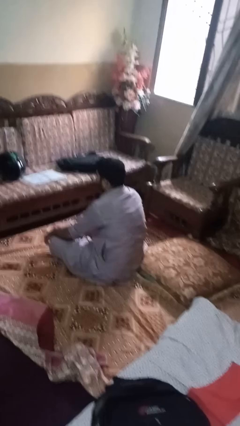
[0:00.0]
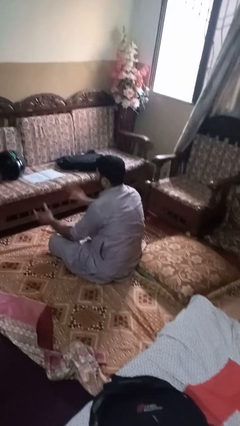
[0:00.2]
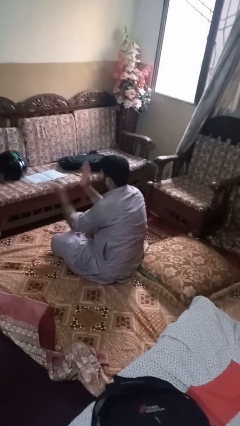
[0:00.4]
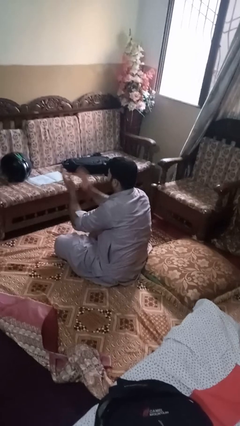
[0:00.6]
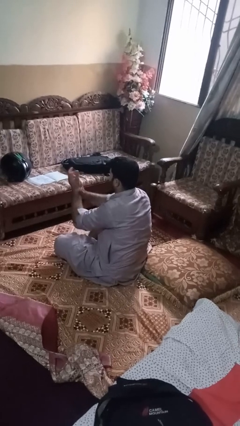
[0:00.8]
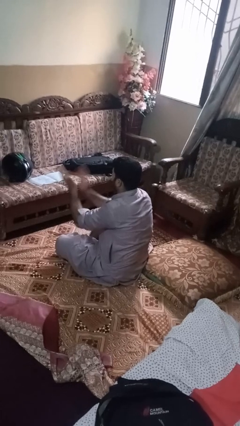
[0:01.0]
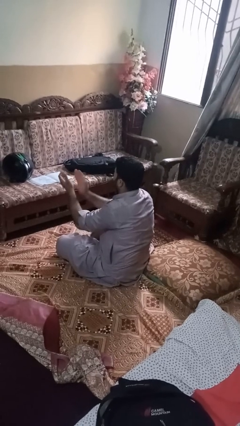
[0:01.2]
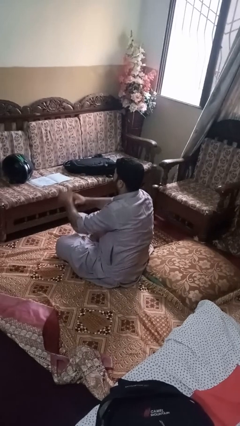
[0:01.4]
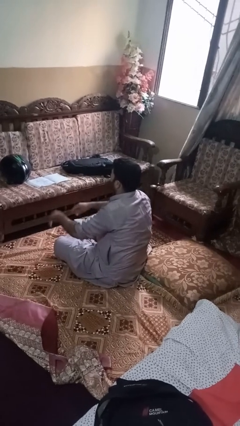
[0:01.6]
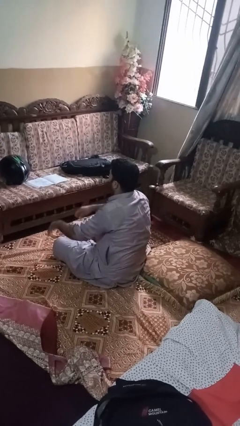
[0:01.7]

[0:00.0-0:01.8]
person claps hands

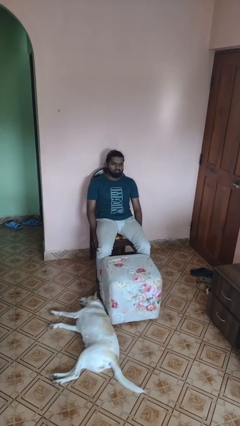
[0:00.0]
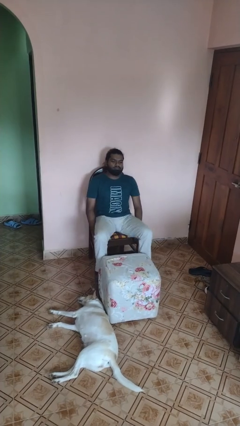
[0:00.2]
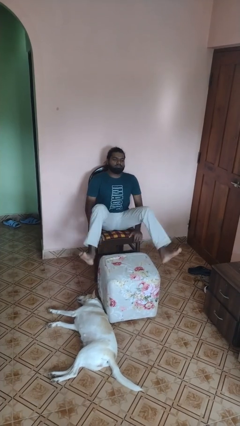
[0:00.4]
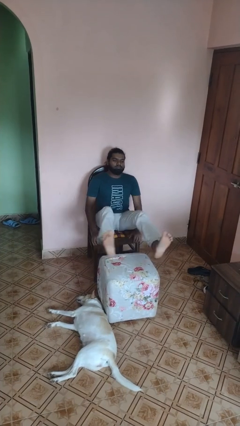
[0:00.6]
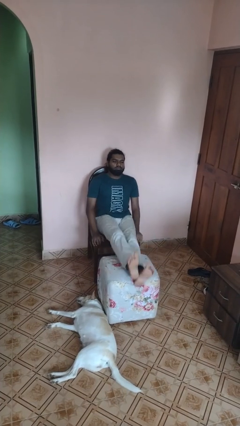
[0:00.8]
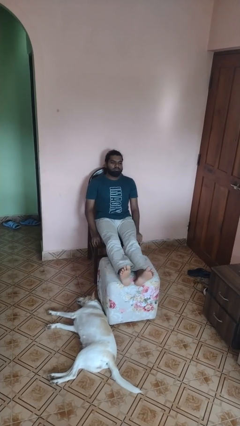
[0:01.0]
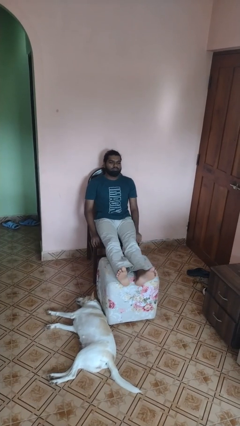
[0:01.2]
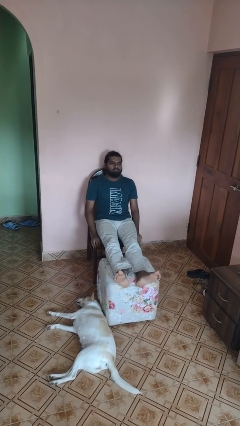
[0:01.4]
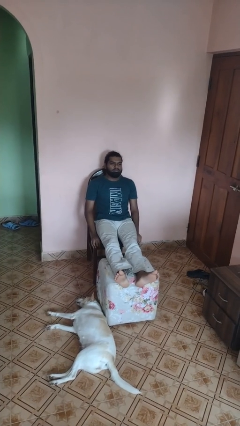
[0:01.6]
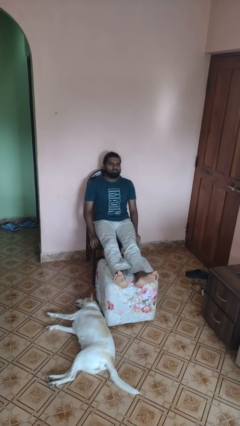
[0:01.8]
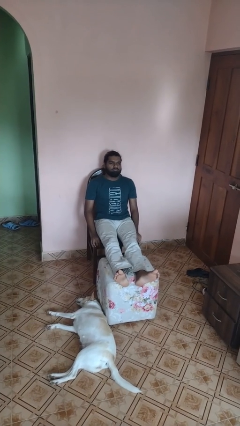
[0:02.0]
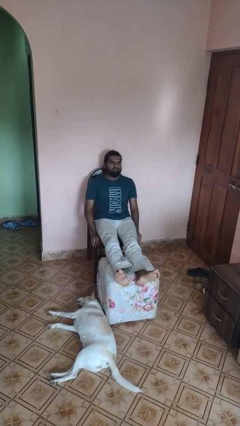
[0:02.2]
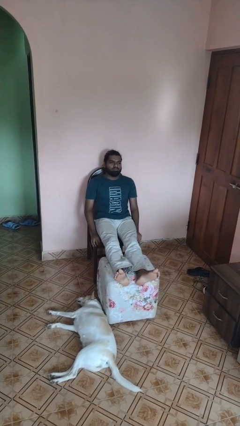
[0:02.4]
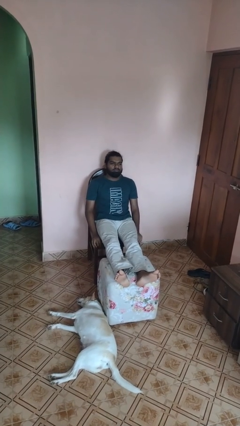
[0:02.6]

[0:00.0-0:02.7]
person puts feet up

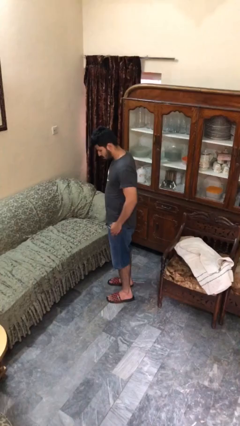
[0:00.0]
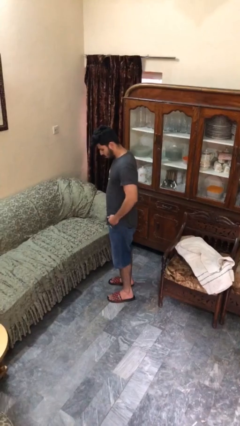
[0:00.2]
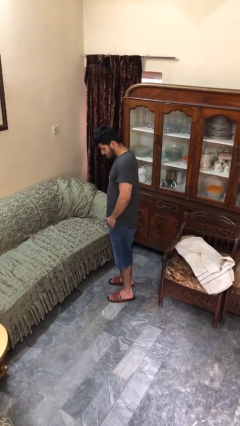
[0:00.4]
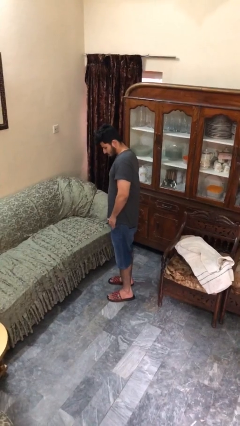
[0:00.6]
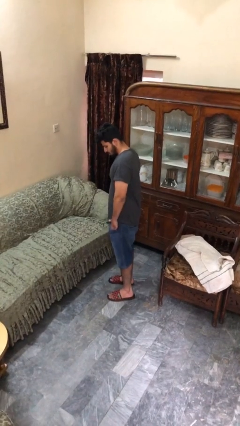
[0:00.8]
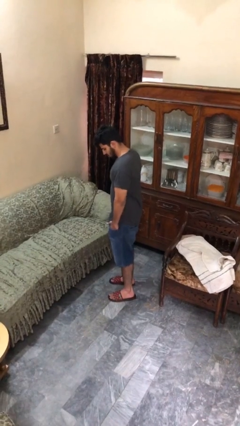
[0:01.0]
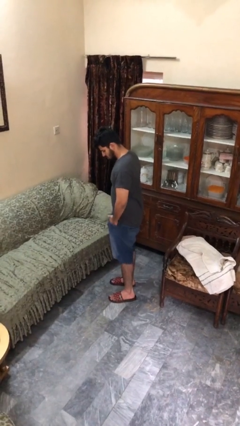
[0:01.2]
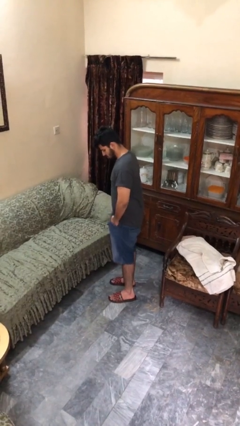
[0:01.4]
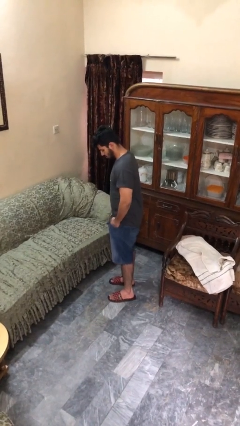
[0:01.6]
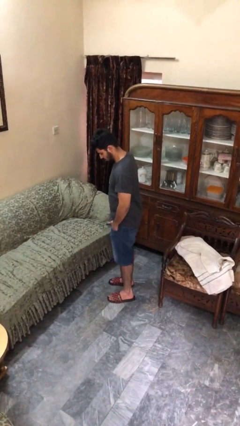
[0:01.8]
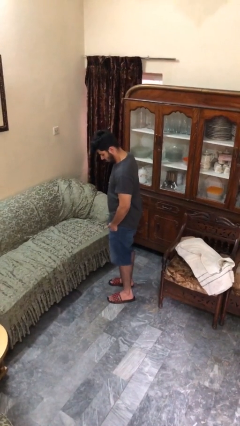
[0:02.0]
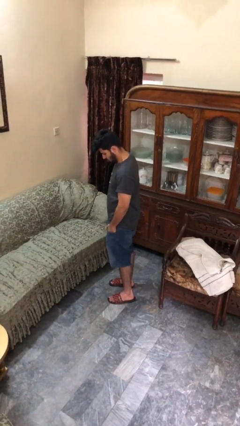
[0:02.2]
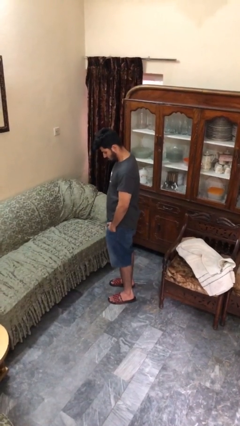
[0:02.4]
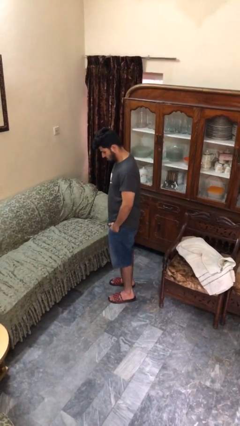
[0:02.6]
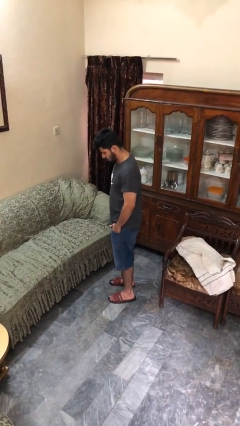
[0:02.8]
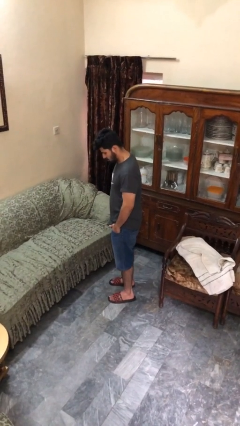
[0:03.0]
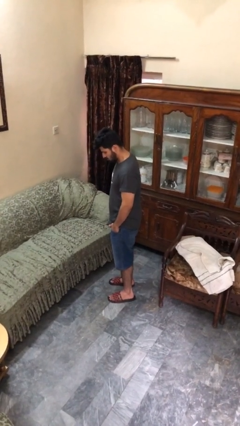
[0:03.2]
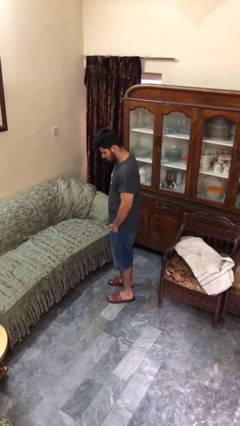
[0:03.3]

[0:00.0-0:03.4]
person puts hands in back pockets

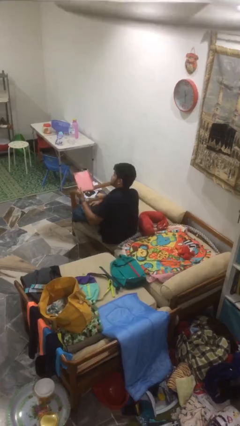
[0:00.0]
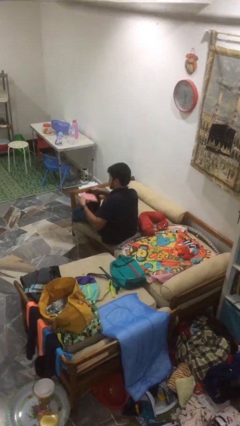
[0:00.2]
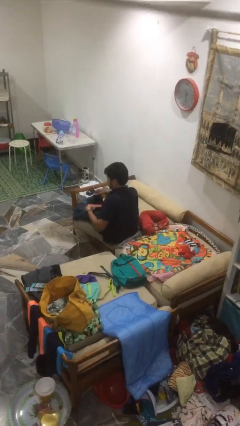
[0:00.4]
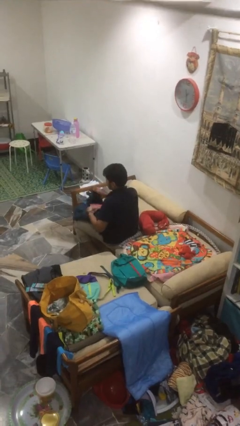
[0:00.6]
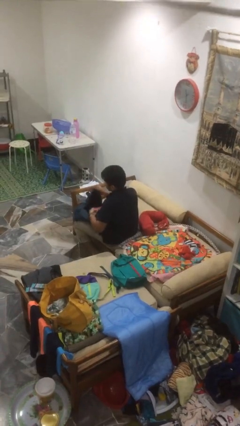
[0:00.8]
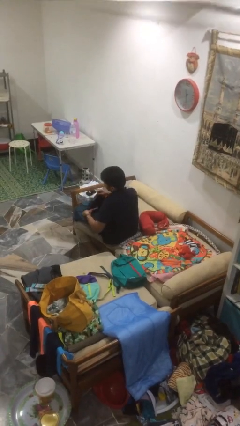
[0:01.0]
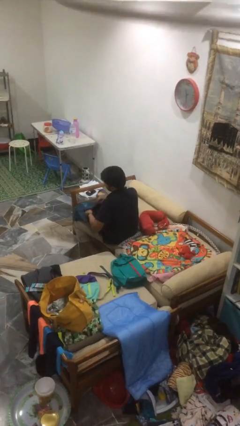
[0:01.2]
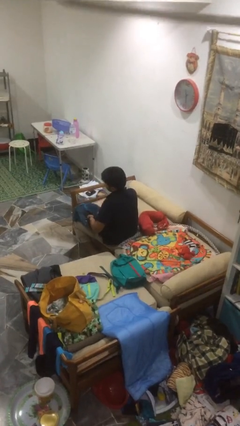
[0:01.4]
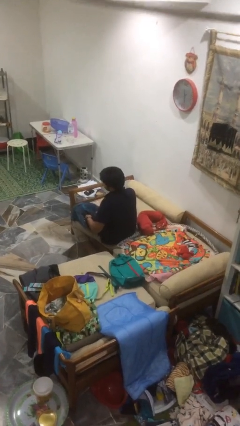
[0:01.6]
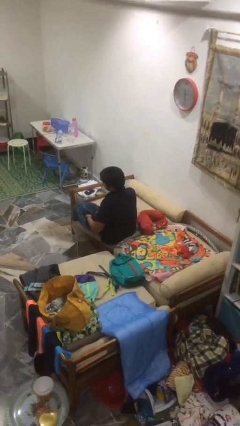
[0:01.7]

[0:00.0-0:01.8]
person puts object into bag

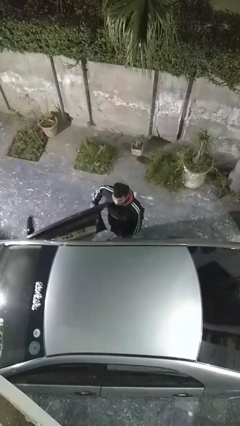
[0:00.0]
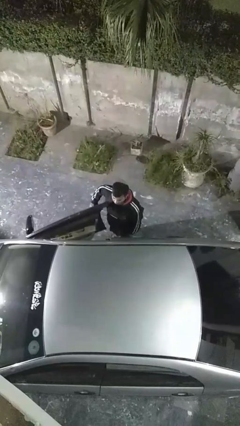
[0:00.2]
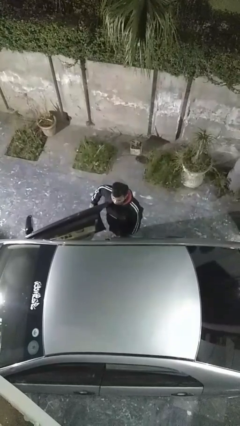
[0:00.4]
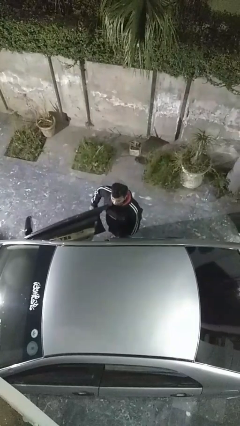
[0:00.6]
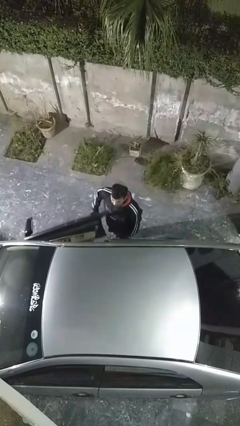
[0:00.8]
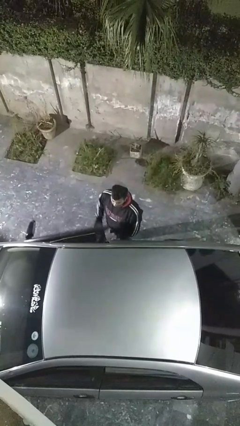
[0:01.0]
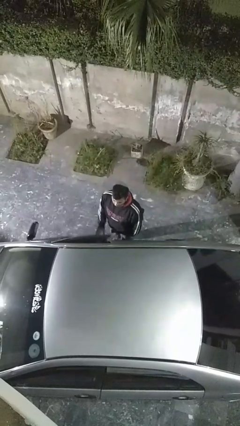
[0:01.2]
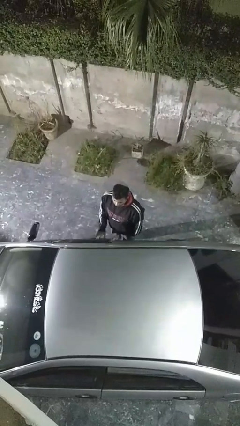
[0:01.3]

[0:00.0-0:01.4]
person closes car door

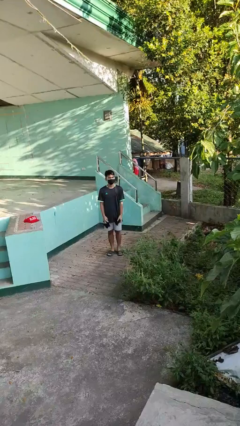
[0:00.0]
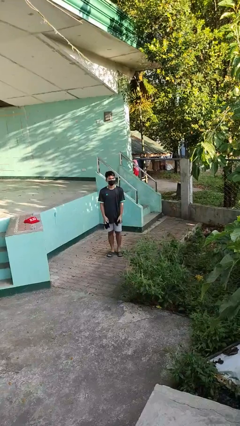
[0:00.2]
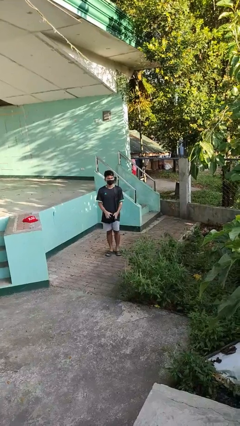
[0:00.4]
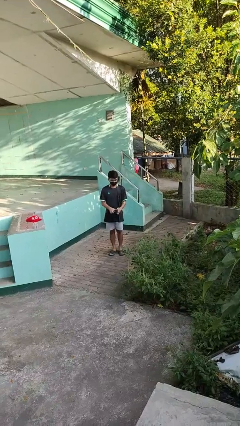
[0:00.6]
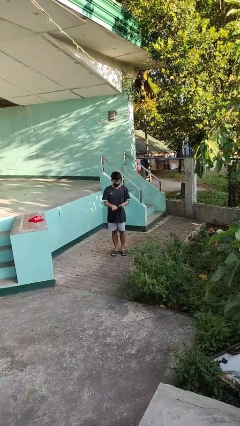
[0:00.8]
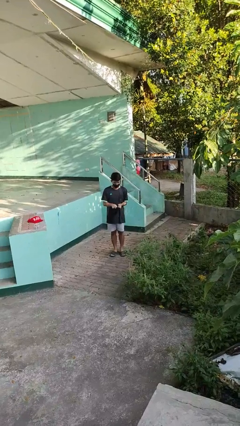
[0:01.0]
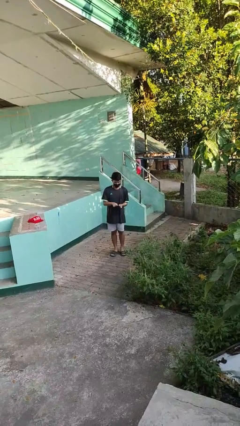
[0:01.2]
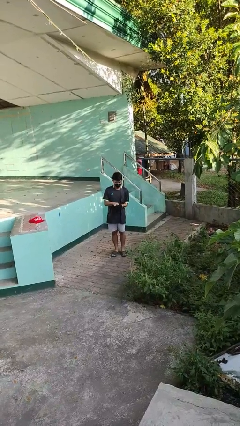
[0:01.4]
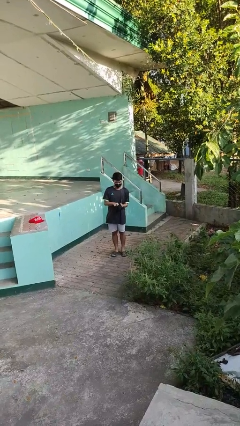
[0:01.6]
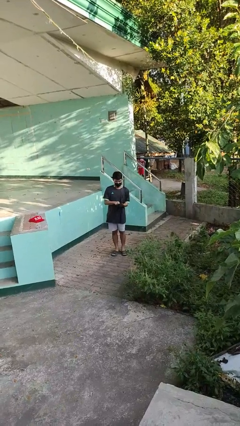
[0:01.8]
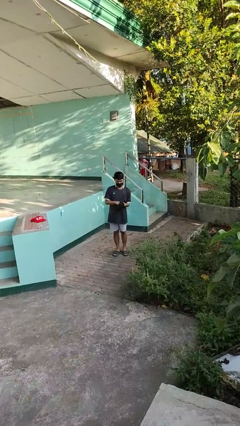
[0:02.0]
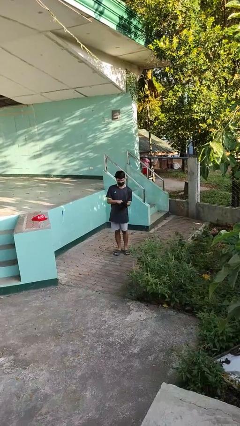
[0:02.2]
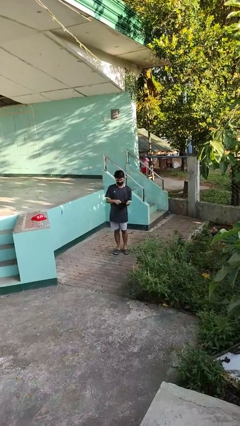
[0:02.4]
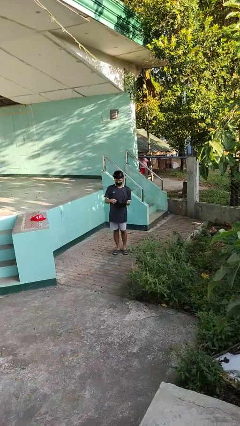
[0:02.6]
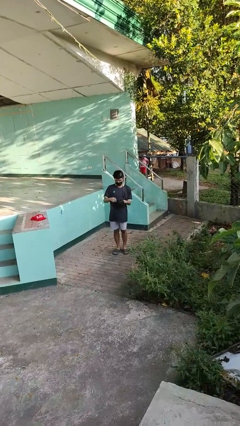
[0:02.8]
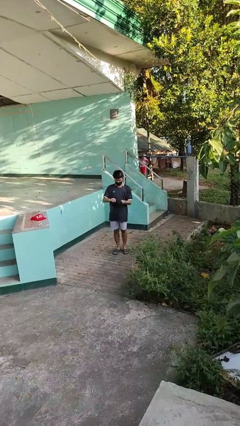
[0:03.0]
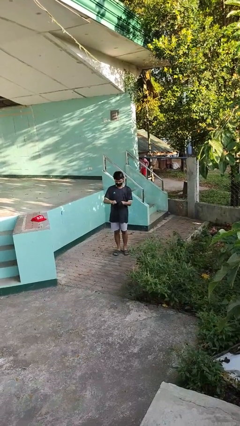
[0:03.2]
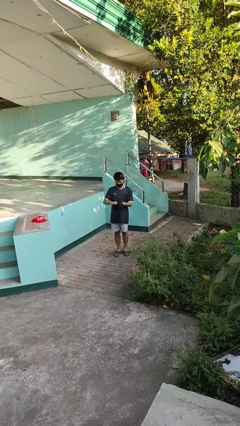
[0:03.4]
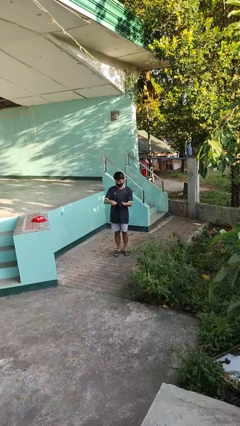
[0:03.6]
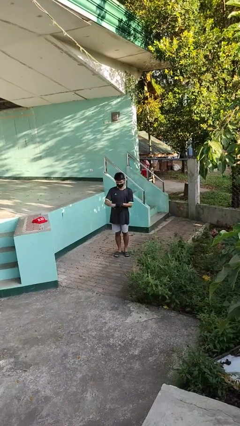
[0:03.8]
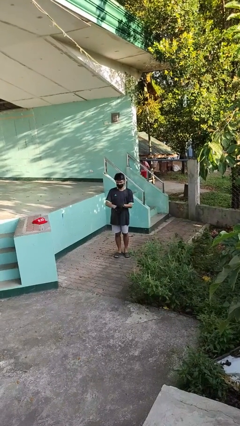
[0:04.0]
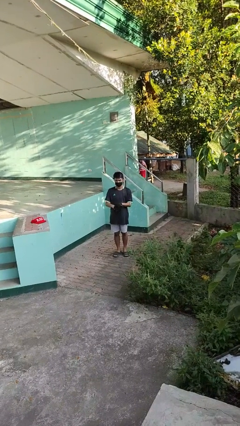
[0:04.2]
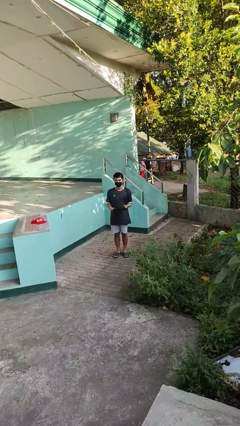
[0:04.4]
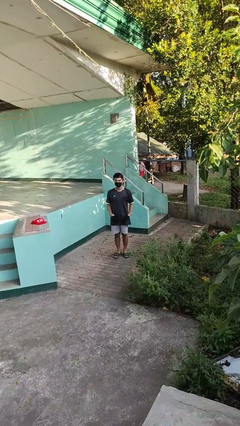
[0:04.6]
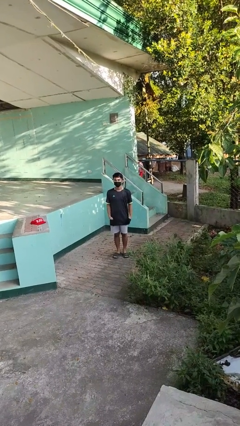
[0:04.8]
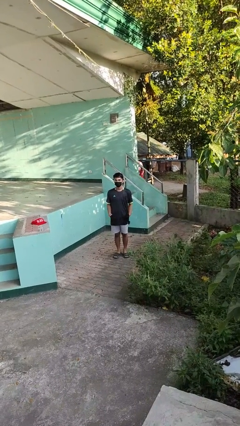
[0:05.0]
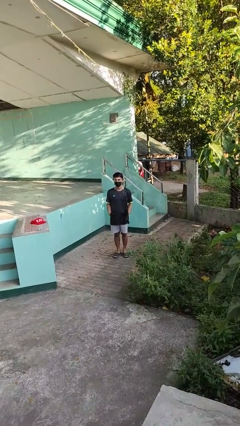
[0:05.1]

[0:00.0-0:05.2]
person puts on gloves

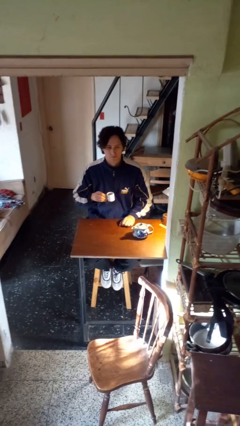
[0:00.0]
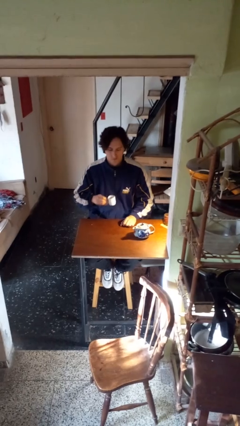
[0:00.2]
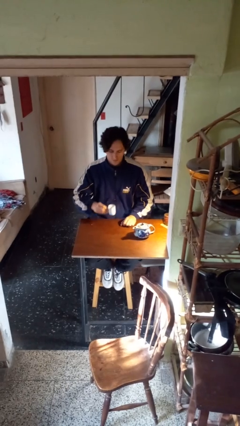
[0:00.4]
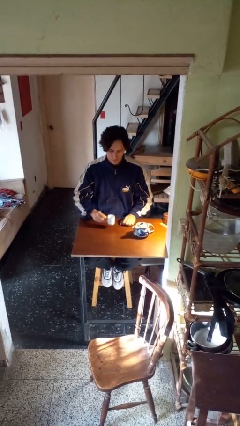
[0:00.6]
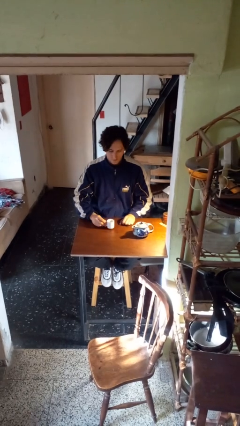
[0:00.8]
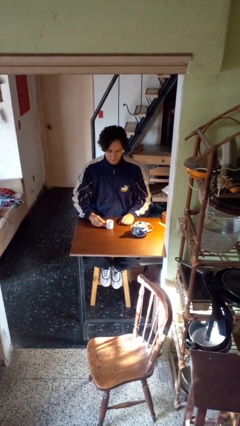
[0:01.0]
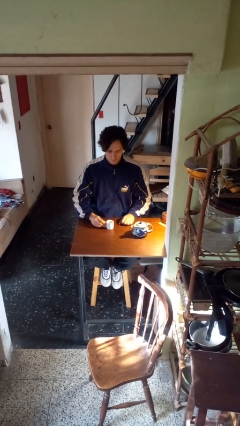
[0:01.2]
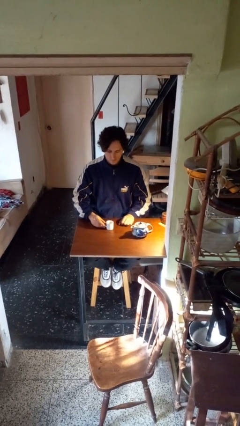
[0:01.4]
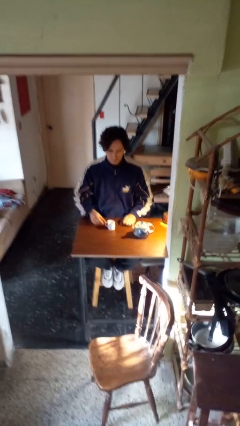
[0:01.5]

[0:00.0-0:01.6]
person puts down object on table
